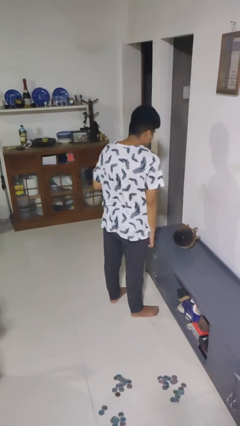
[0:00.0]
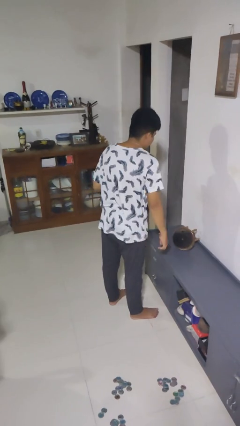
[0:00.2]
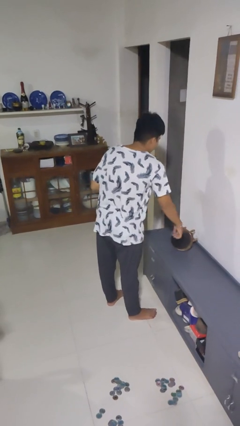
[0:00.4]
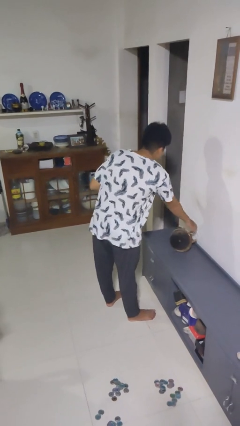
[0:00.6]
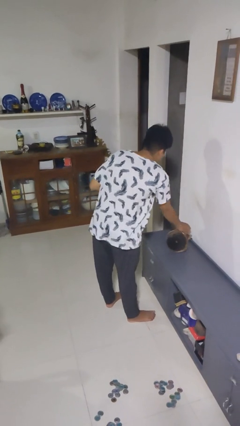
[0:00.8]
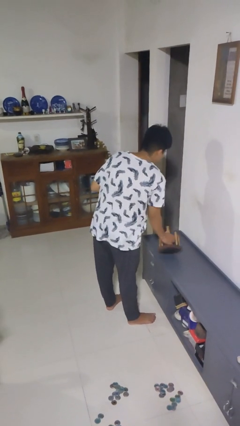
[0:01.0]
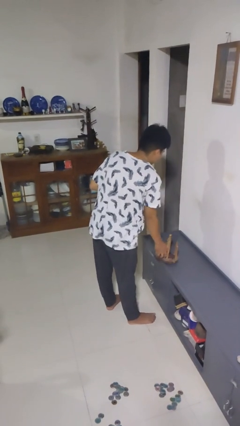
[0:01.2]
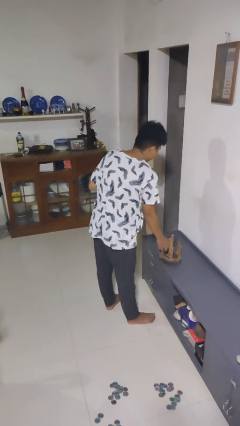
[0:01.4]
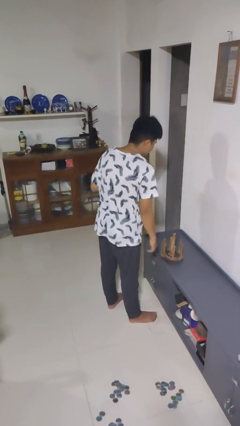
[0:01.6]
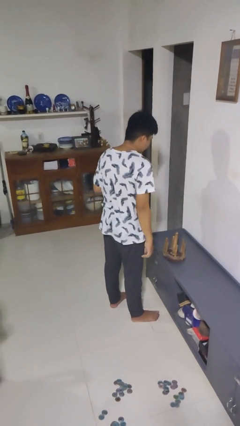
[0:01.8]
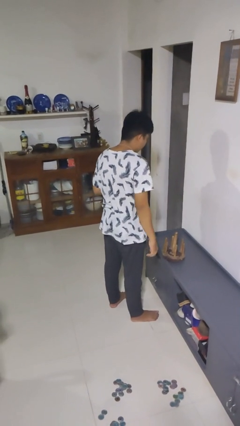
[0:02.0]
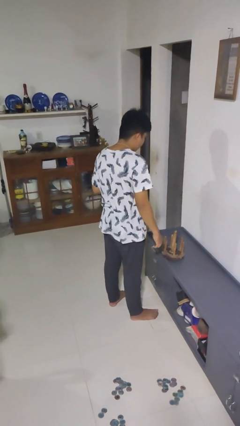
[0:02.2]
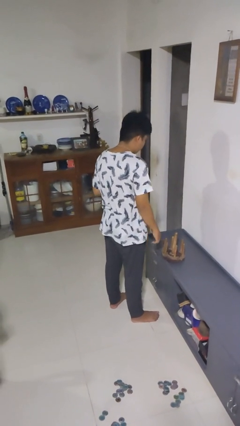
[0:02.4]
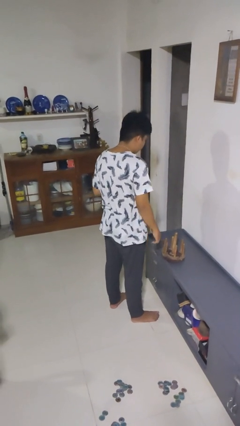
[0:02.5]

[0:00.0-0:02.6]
person sets upright furniture

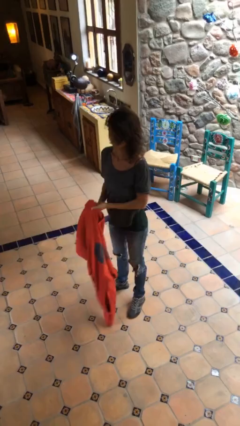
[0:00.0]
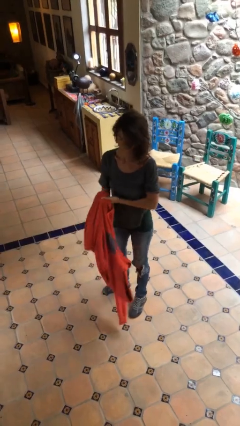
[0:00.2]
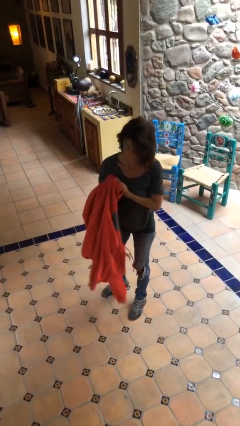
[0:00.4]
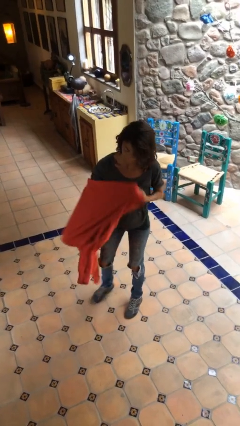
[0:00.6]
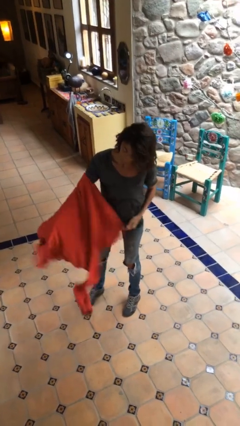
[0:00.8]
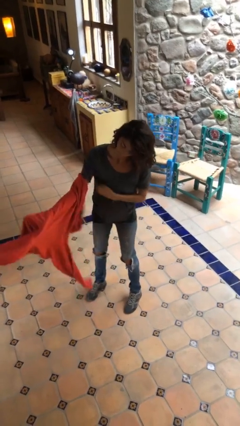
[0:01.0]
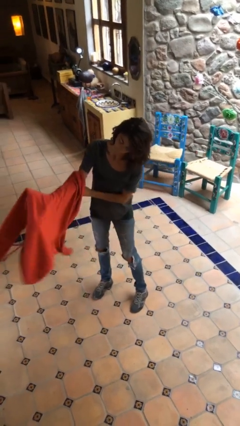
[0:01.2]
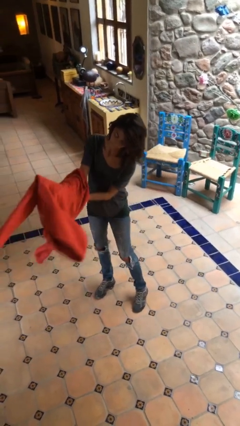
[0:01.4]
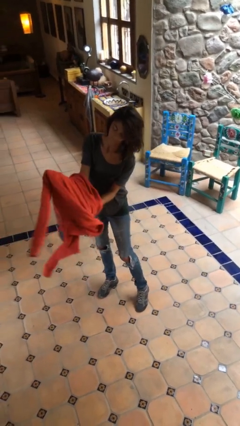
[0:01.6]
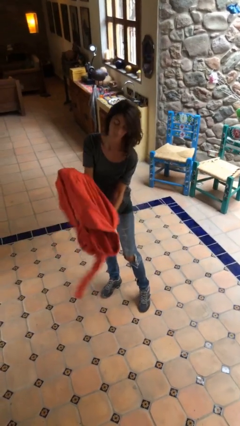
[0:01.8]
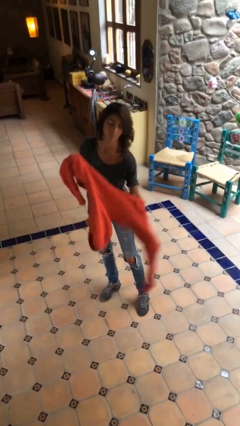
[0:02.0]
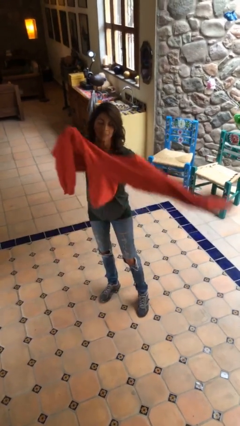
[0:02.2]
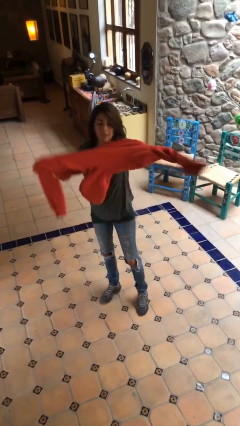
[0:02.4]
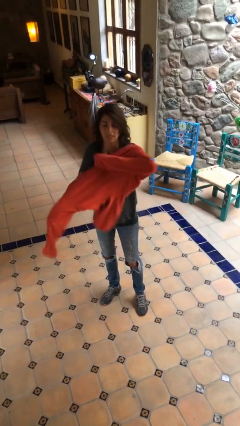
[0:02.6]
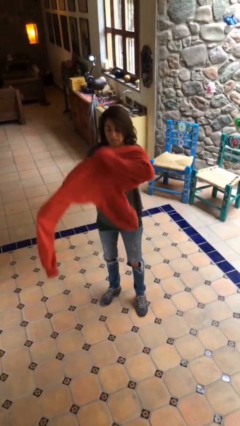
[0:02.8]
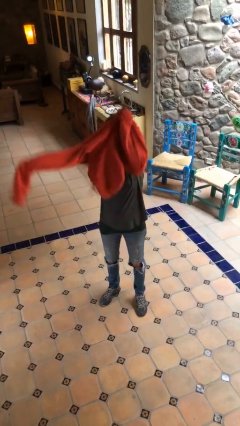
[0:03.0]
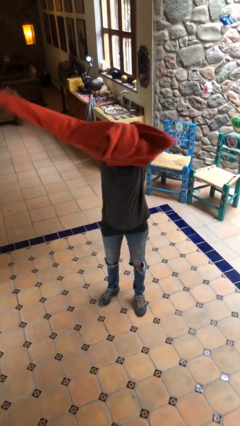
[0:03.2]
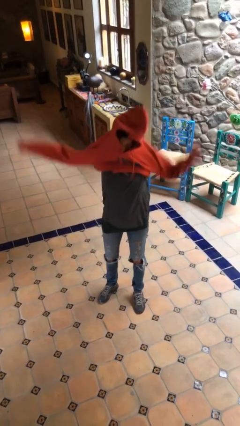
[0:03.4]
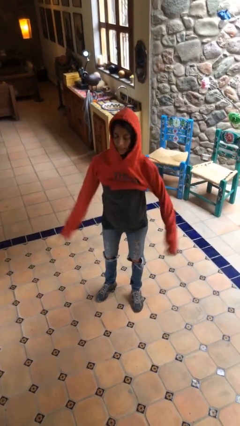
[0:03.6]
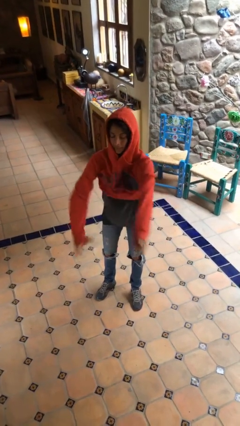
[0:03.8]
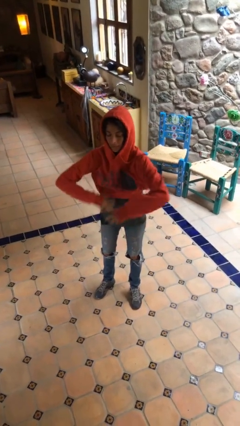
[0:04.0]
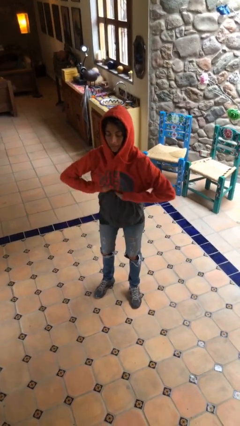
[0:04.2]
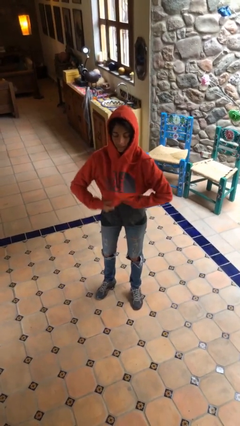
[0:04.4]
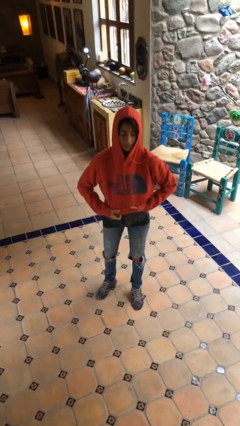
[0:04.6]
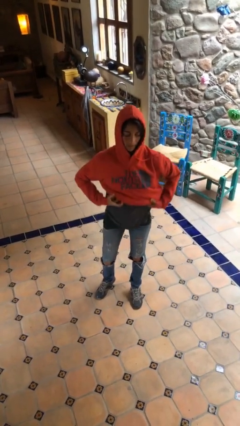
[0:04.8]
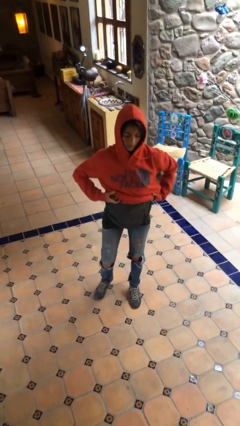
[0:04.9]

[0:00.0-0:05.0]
person puts on hoodie

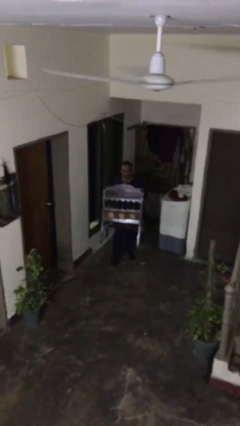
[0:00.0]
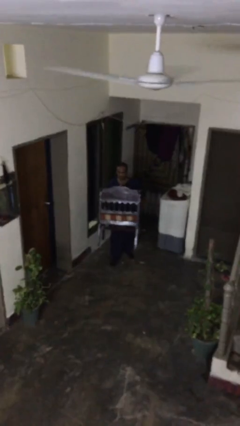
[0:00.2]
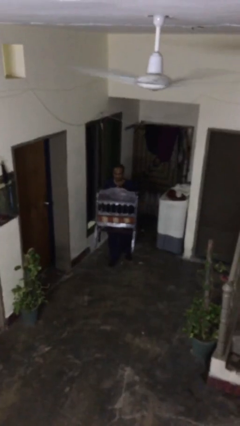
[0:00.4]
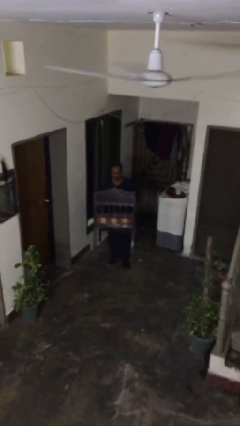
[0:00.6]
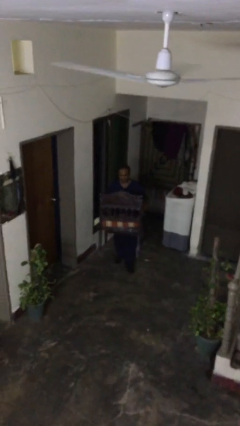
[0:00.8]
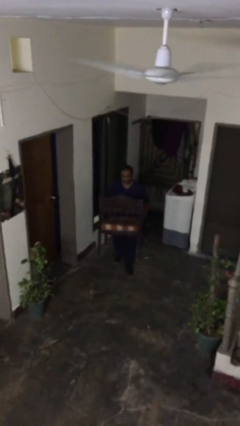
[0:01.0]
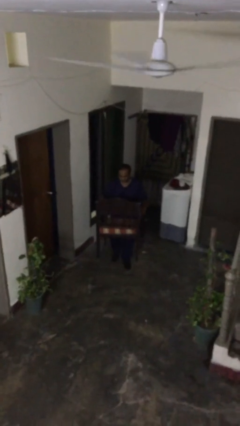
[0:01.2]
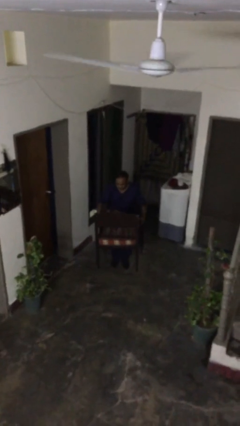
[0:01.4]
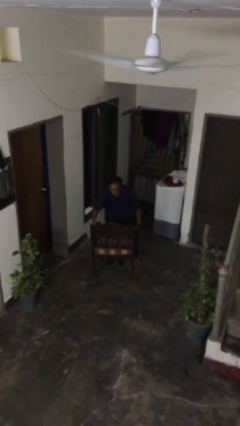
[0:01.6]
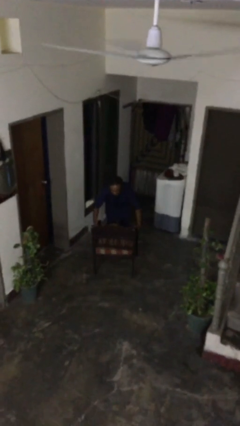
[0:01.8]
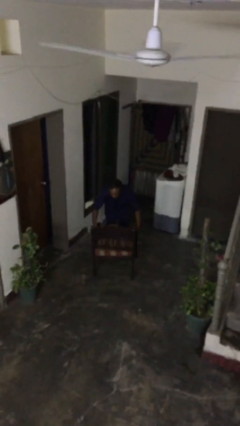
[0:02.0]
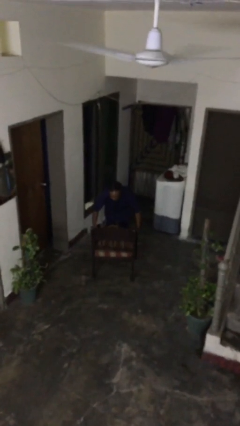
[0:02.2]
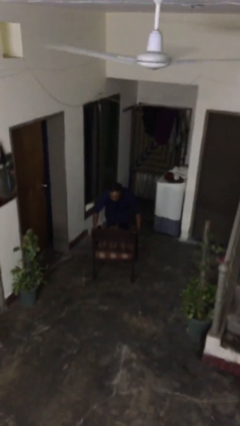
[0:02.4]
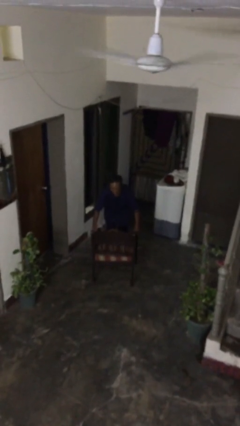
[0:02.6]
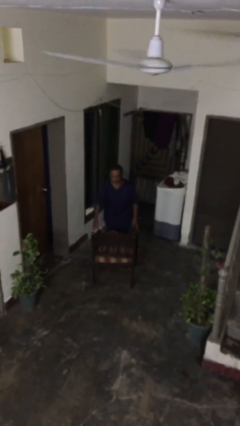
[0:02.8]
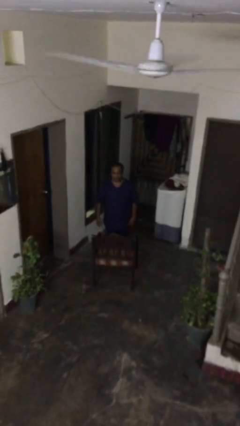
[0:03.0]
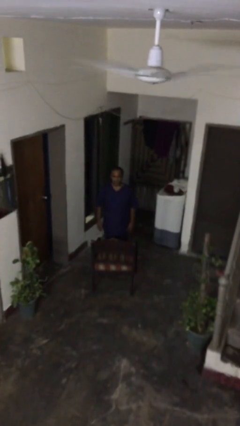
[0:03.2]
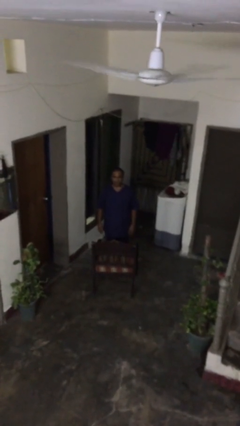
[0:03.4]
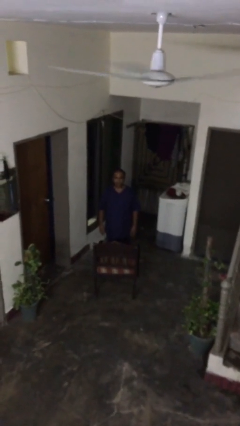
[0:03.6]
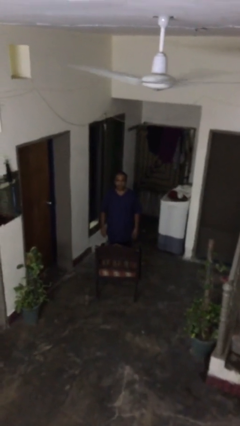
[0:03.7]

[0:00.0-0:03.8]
person puts down object on floor

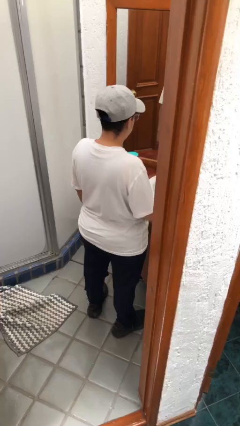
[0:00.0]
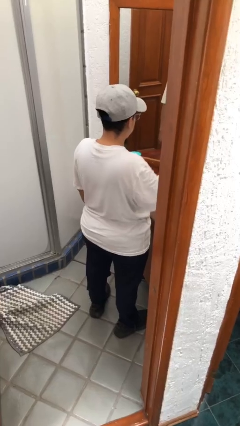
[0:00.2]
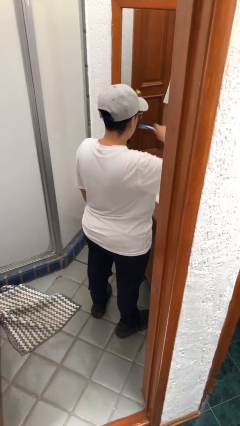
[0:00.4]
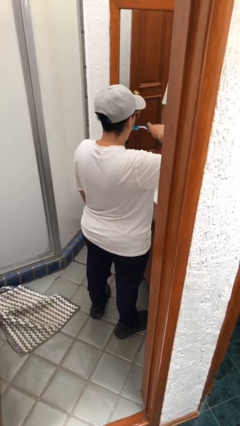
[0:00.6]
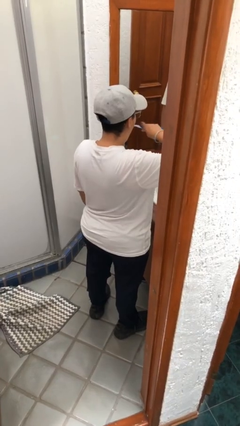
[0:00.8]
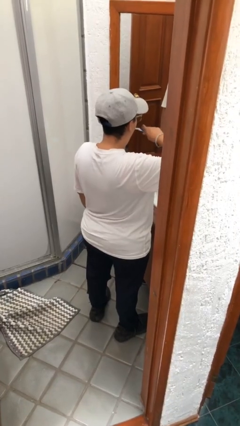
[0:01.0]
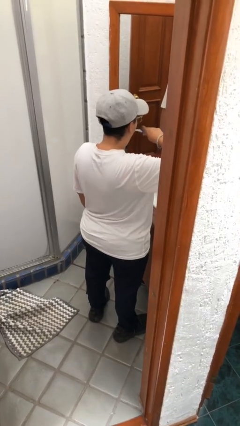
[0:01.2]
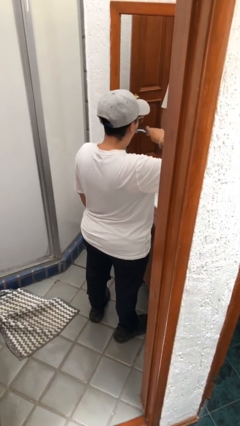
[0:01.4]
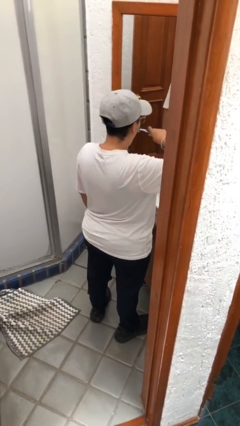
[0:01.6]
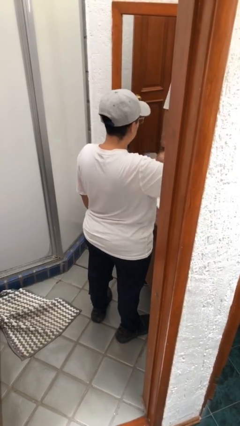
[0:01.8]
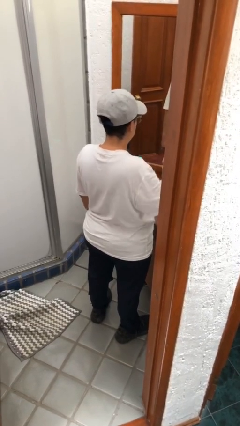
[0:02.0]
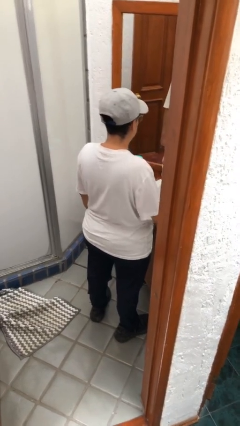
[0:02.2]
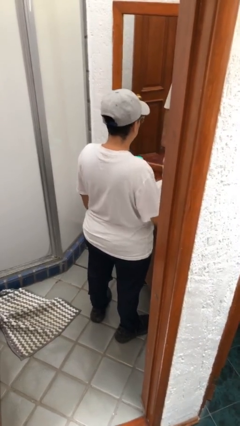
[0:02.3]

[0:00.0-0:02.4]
person brushes teeth

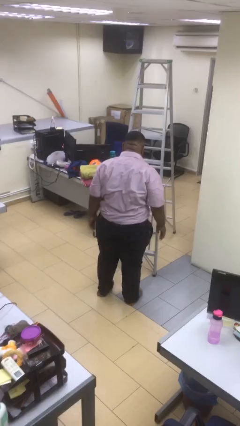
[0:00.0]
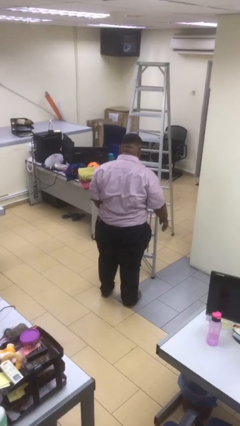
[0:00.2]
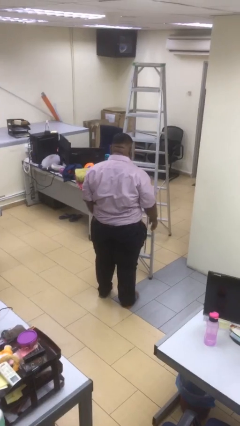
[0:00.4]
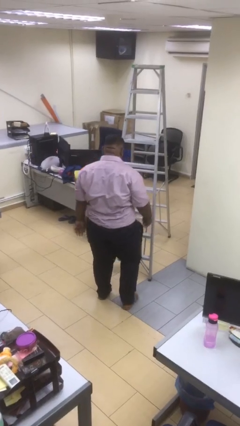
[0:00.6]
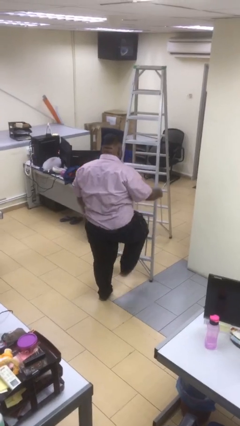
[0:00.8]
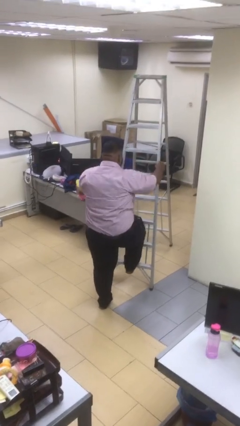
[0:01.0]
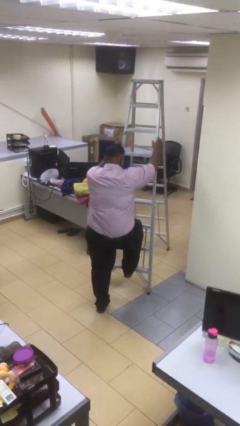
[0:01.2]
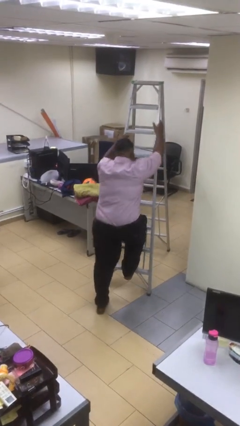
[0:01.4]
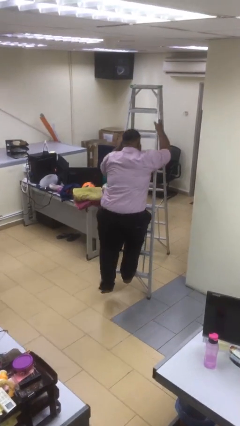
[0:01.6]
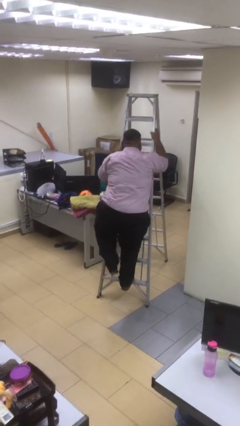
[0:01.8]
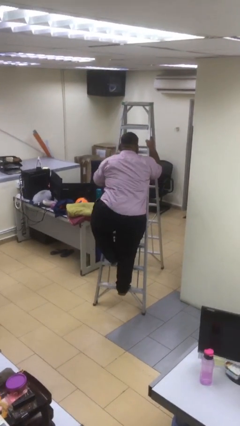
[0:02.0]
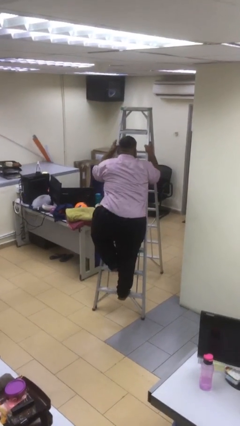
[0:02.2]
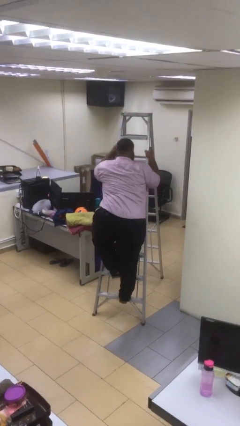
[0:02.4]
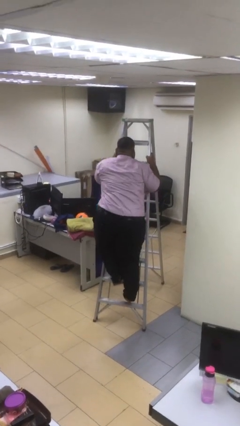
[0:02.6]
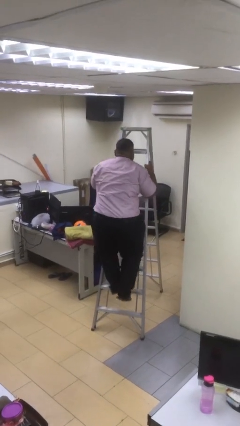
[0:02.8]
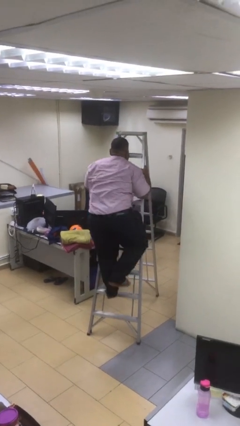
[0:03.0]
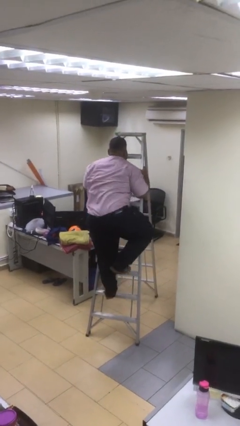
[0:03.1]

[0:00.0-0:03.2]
person climbs up ladder

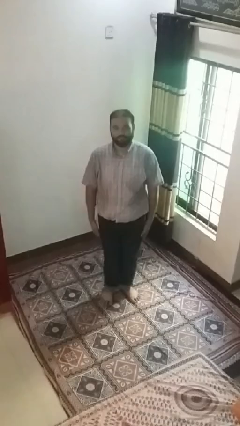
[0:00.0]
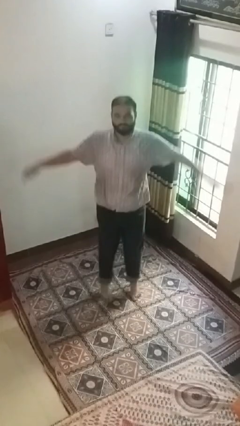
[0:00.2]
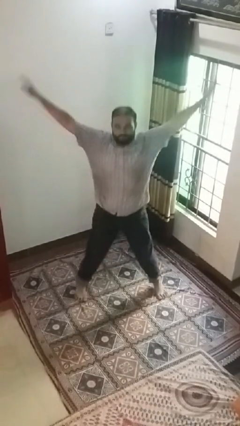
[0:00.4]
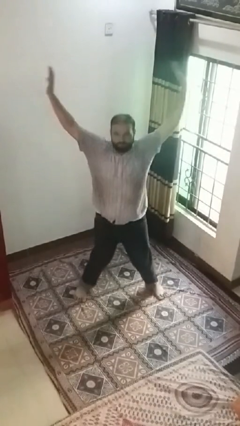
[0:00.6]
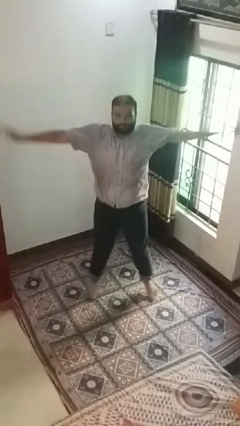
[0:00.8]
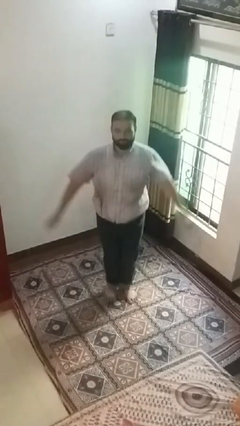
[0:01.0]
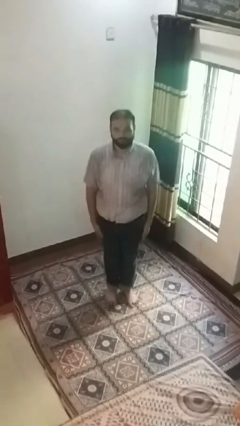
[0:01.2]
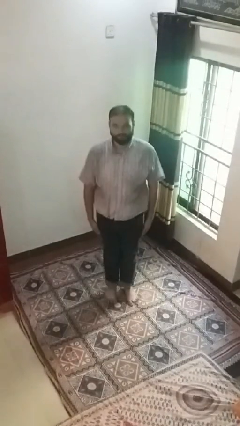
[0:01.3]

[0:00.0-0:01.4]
person exercises with jumping jacks
